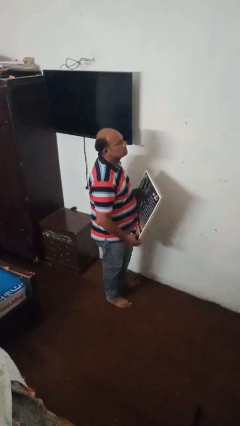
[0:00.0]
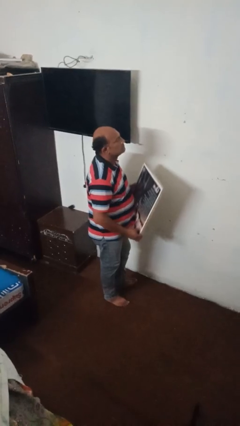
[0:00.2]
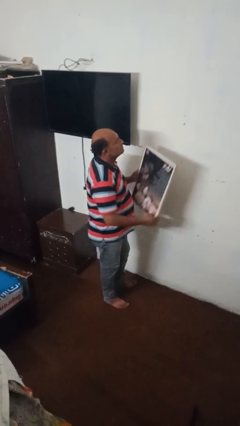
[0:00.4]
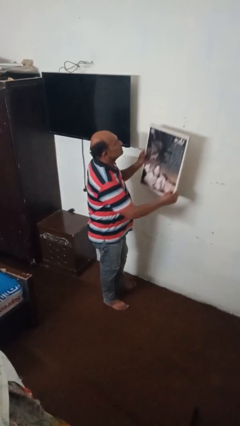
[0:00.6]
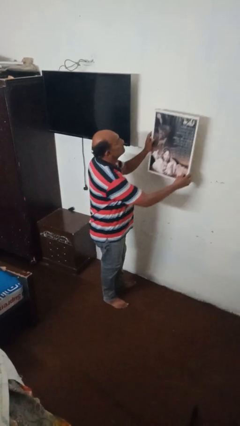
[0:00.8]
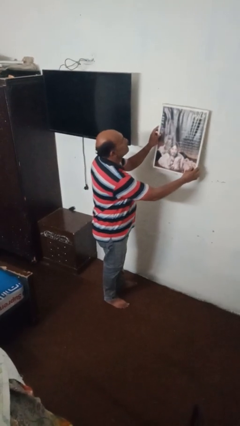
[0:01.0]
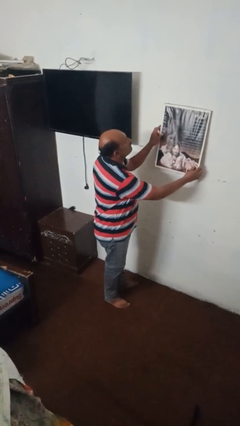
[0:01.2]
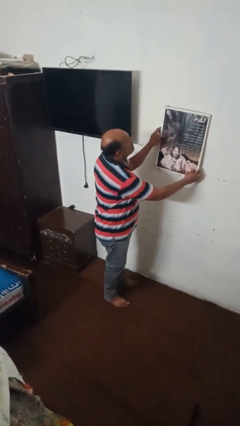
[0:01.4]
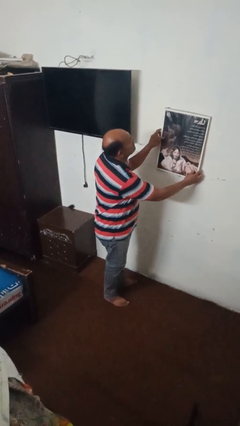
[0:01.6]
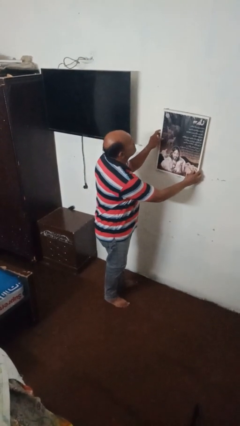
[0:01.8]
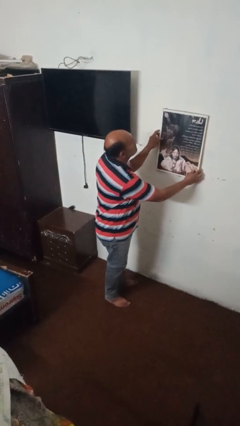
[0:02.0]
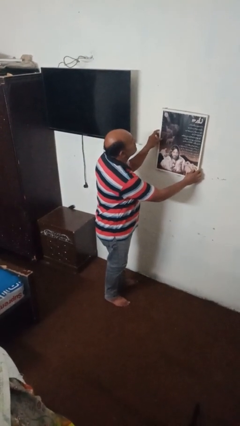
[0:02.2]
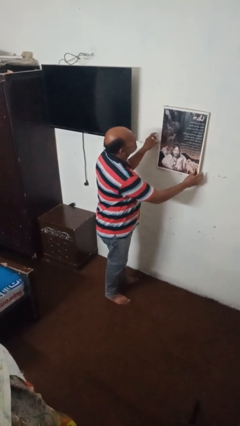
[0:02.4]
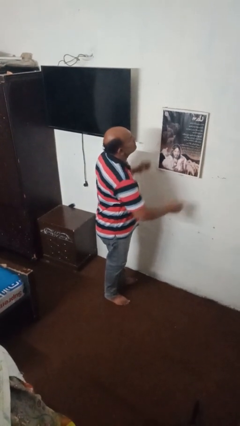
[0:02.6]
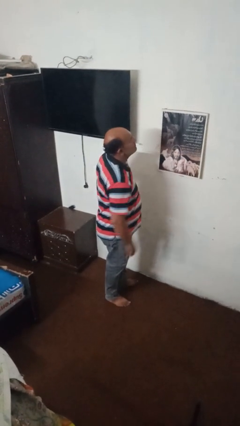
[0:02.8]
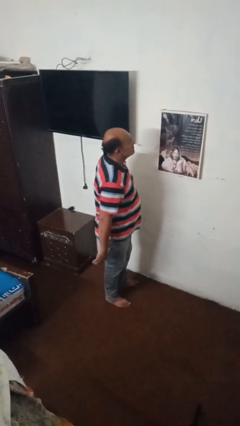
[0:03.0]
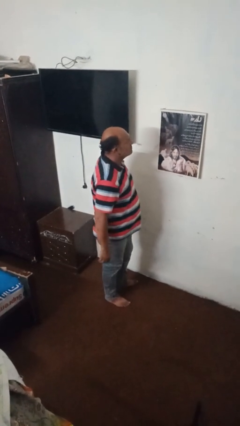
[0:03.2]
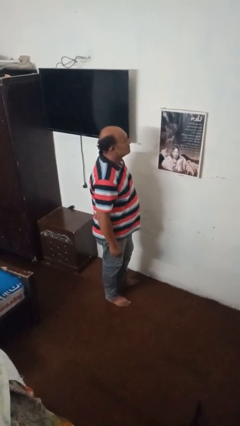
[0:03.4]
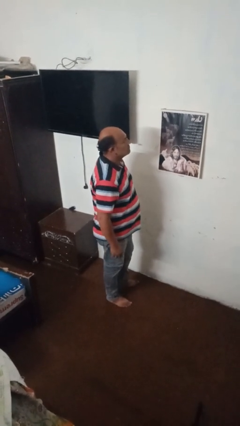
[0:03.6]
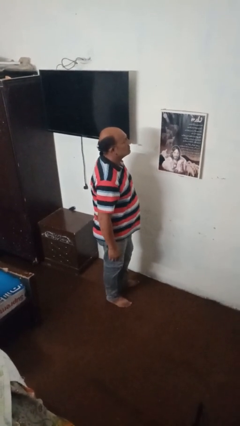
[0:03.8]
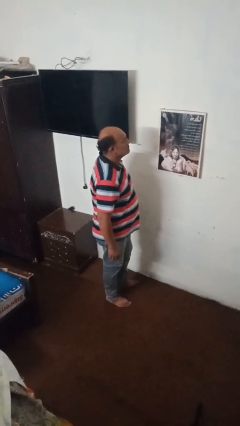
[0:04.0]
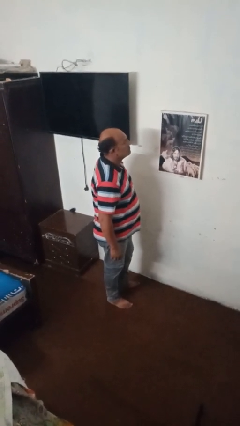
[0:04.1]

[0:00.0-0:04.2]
person puts up picture frame

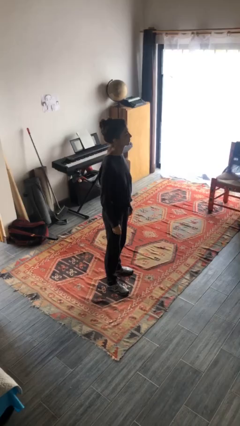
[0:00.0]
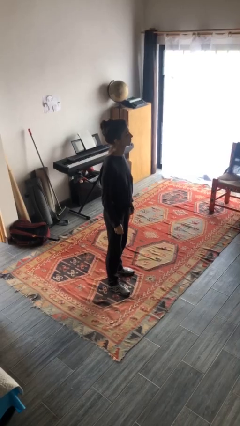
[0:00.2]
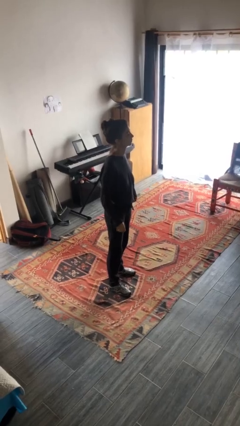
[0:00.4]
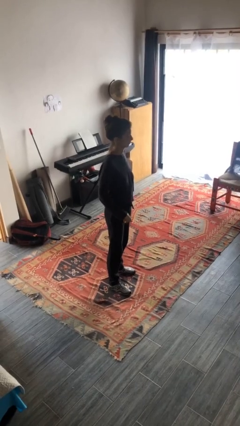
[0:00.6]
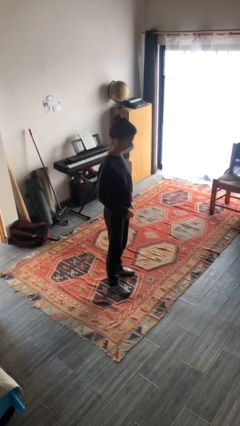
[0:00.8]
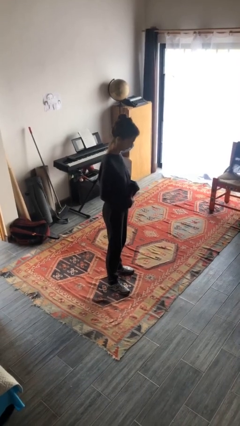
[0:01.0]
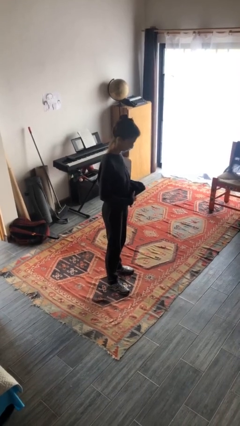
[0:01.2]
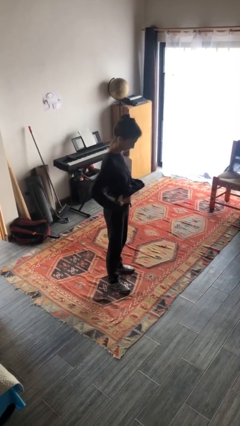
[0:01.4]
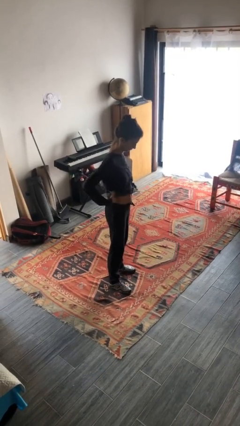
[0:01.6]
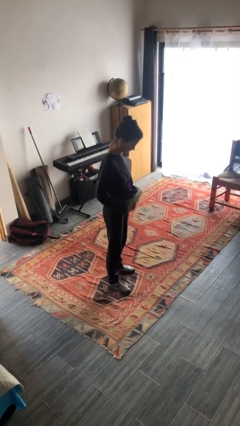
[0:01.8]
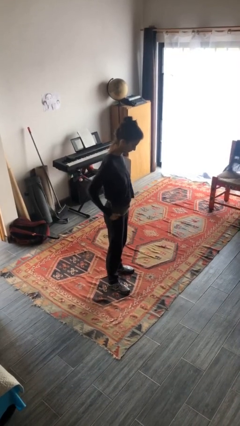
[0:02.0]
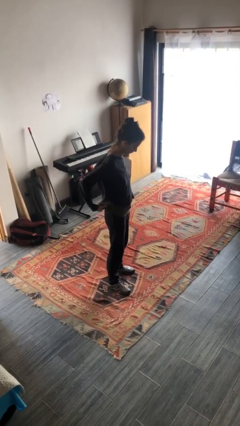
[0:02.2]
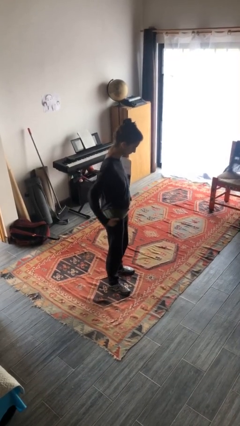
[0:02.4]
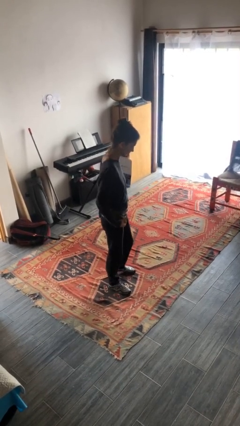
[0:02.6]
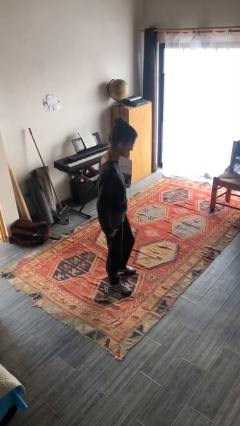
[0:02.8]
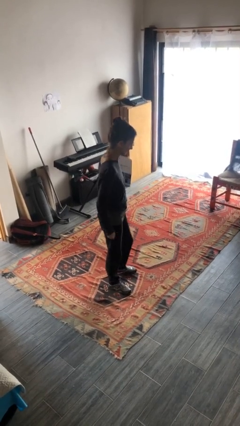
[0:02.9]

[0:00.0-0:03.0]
person untucks shirt

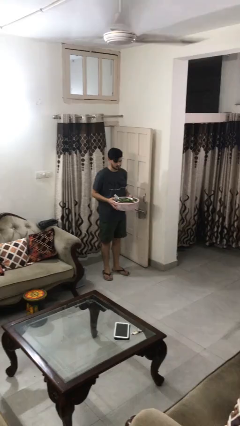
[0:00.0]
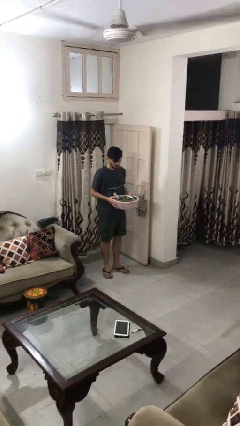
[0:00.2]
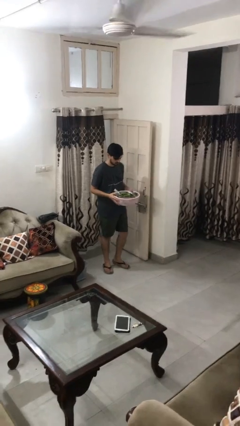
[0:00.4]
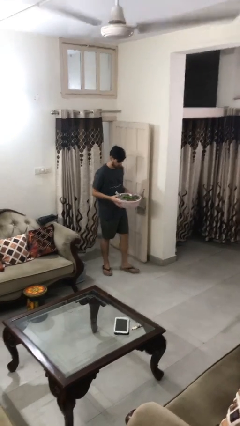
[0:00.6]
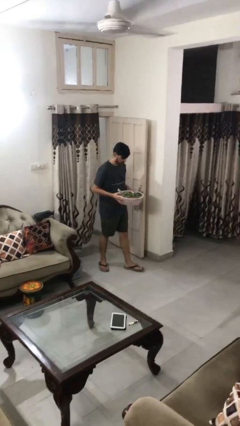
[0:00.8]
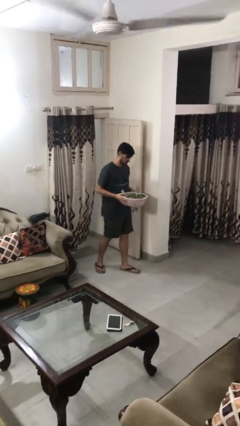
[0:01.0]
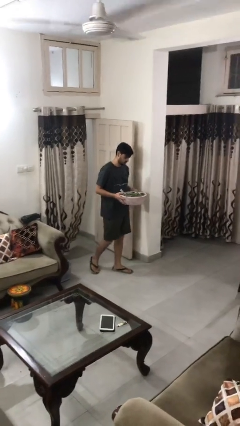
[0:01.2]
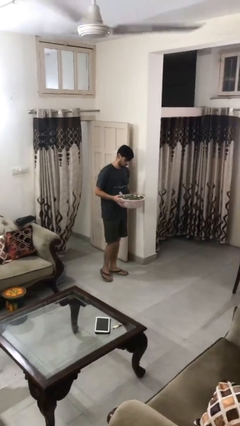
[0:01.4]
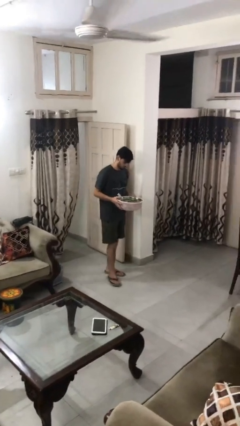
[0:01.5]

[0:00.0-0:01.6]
person carries groceries

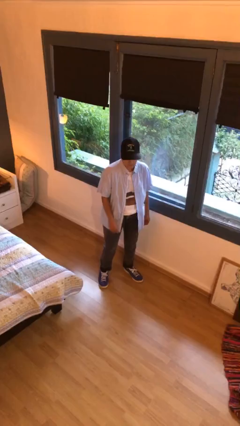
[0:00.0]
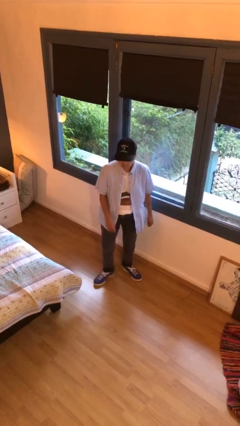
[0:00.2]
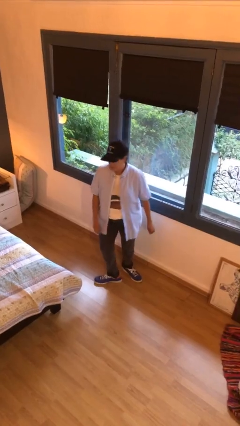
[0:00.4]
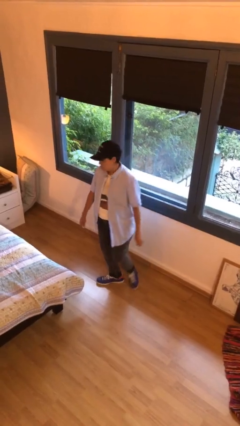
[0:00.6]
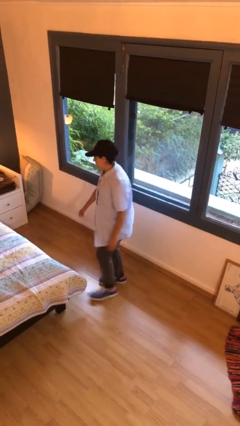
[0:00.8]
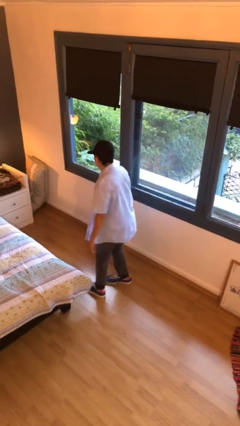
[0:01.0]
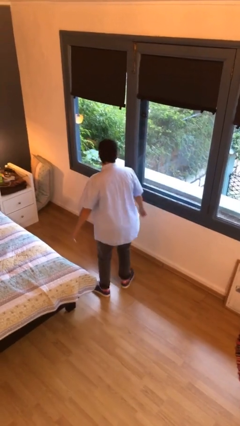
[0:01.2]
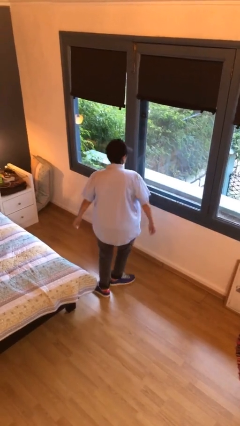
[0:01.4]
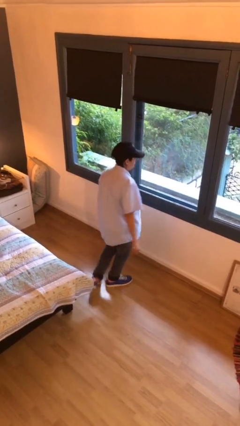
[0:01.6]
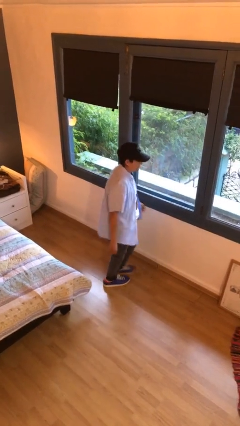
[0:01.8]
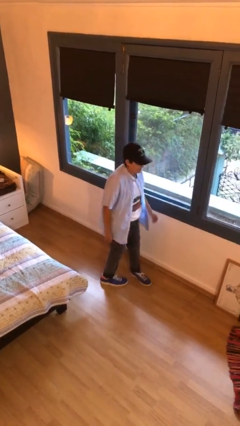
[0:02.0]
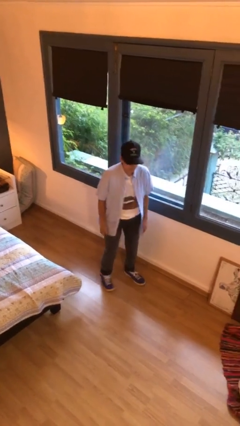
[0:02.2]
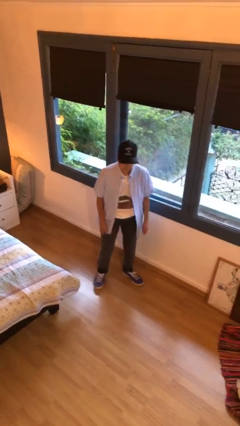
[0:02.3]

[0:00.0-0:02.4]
person twirls

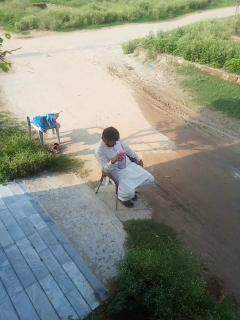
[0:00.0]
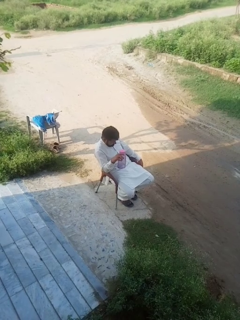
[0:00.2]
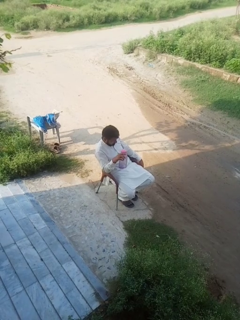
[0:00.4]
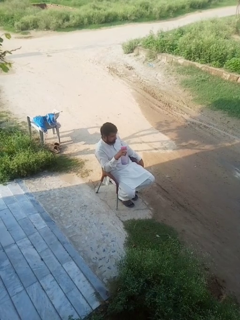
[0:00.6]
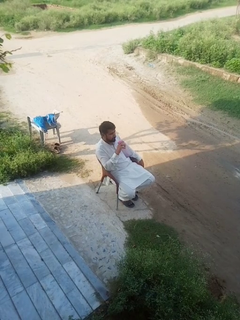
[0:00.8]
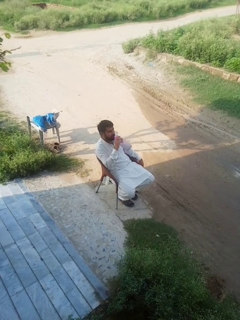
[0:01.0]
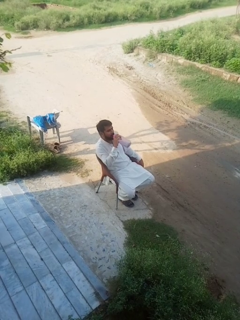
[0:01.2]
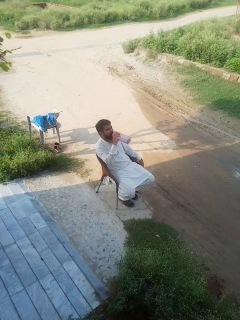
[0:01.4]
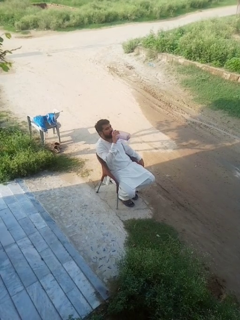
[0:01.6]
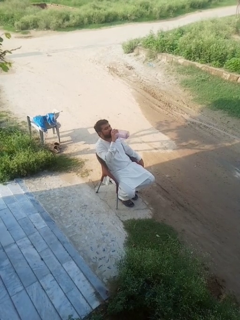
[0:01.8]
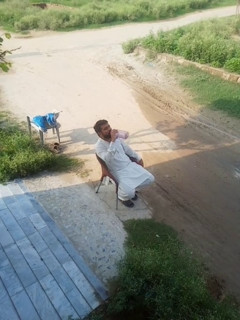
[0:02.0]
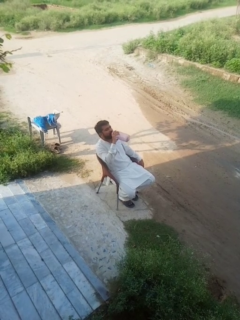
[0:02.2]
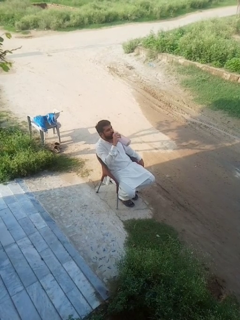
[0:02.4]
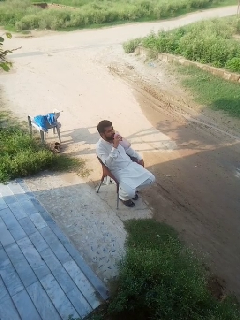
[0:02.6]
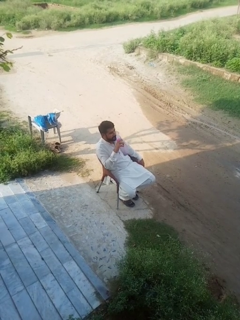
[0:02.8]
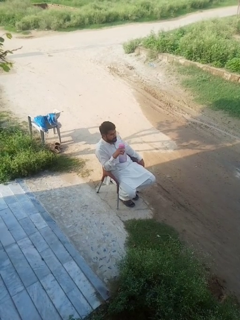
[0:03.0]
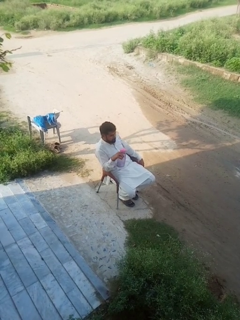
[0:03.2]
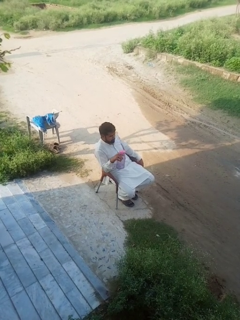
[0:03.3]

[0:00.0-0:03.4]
person drinks from bottle

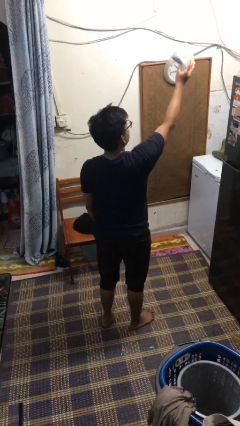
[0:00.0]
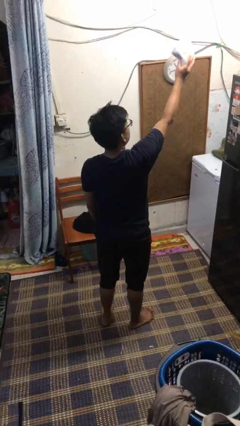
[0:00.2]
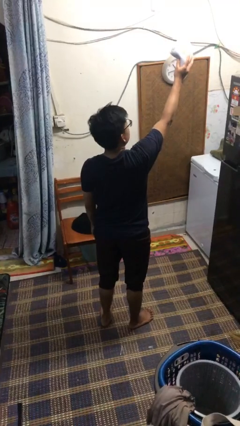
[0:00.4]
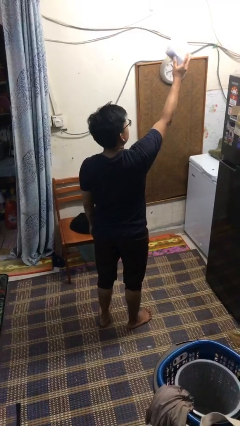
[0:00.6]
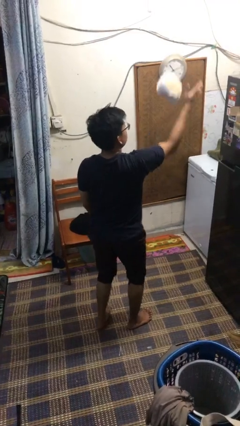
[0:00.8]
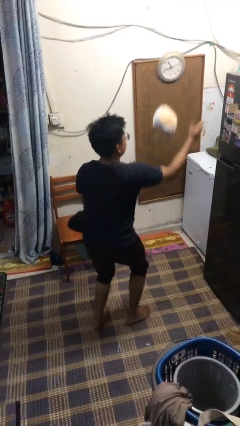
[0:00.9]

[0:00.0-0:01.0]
person drops object

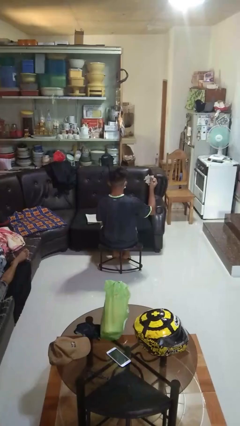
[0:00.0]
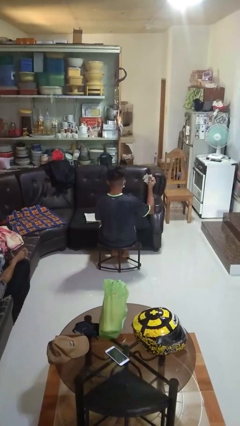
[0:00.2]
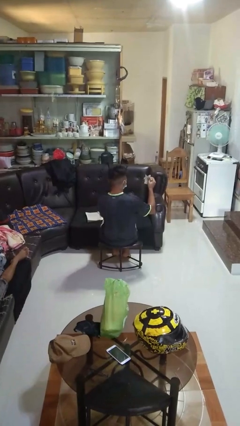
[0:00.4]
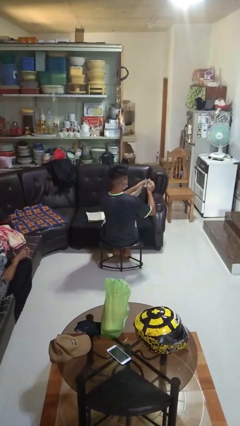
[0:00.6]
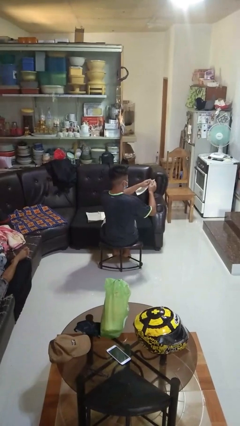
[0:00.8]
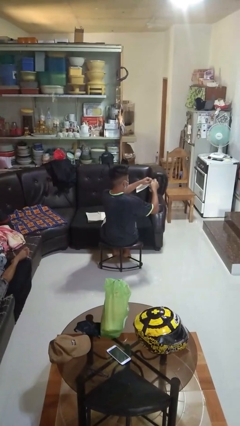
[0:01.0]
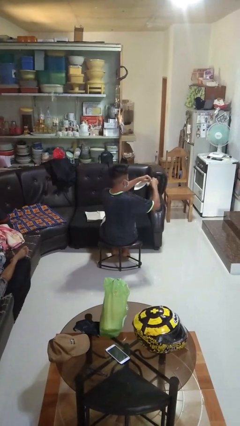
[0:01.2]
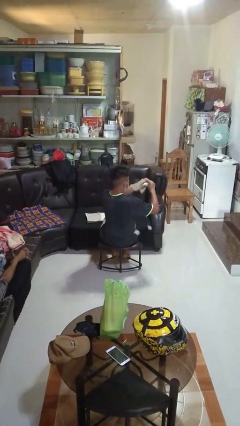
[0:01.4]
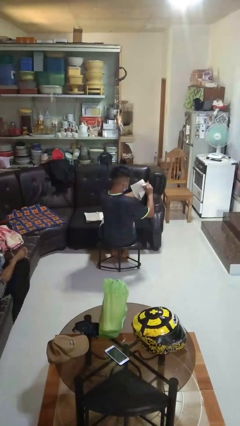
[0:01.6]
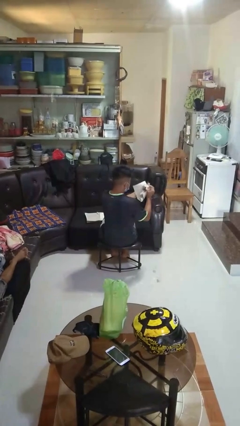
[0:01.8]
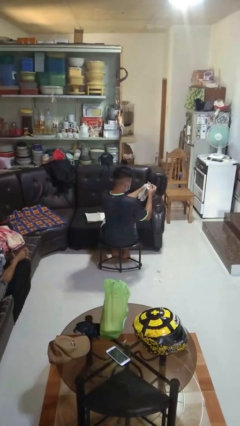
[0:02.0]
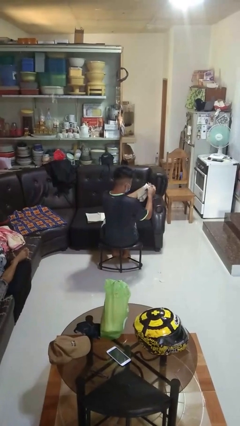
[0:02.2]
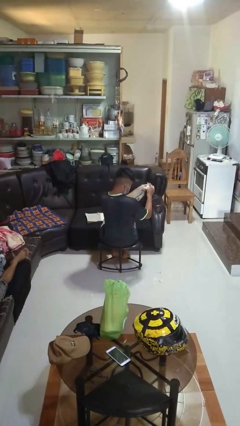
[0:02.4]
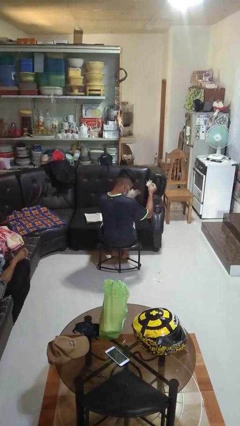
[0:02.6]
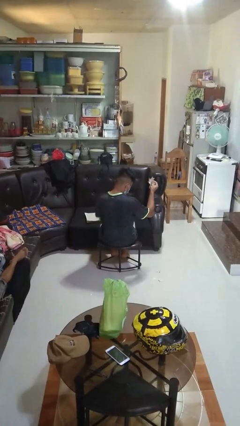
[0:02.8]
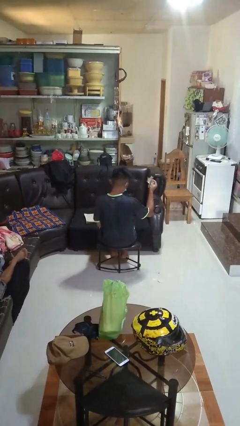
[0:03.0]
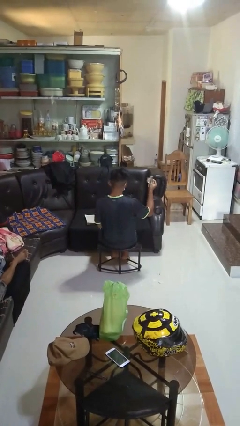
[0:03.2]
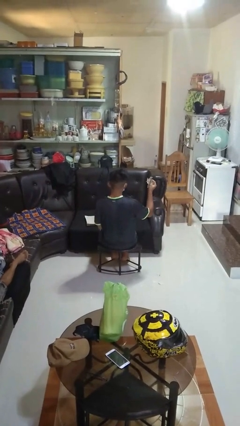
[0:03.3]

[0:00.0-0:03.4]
person tears paper
